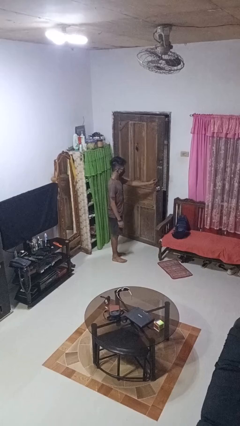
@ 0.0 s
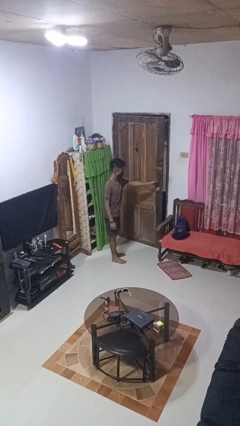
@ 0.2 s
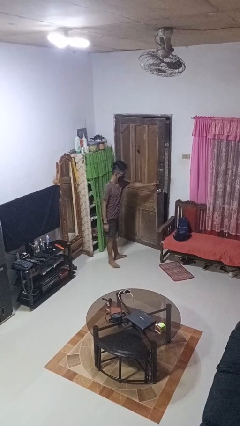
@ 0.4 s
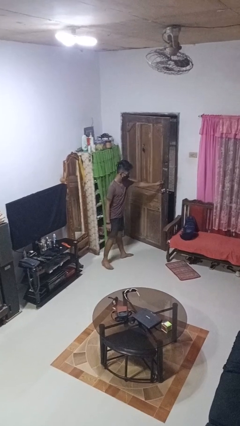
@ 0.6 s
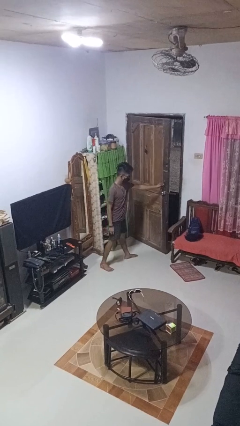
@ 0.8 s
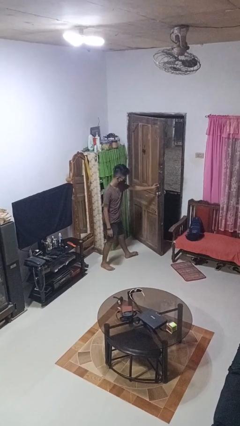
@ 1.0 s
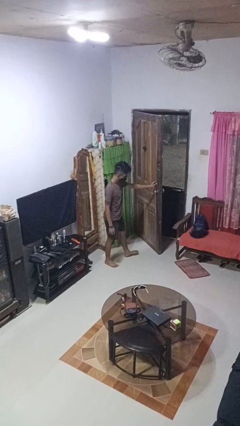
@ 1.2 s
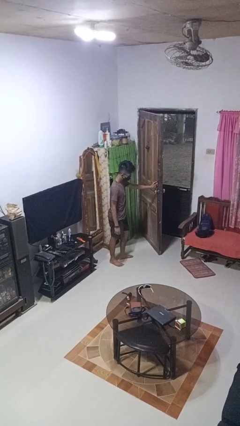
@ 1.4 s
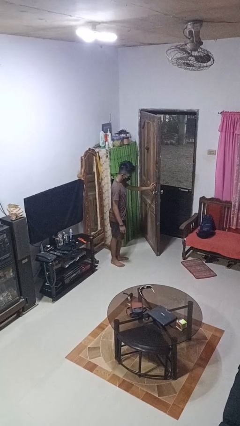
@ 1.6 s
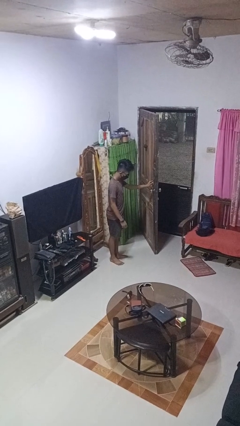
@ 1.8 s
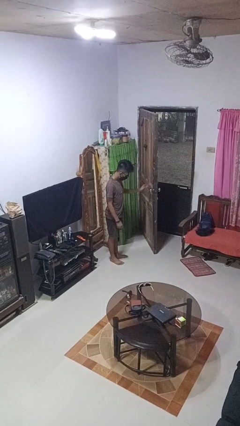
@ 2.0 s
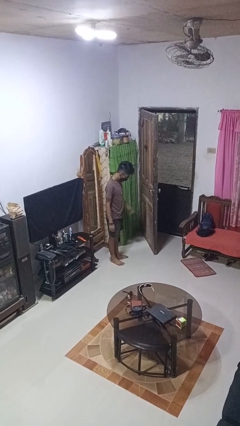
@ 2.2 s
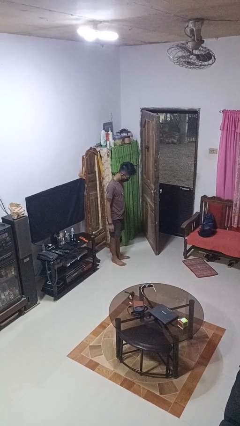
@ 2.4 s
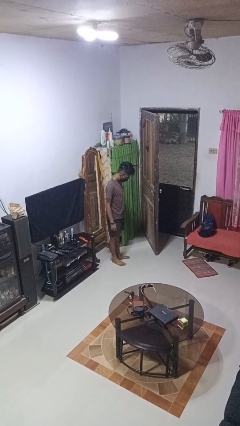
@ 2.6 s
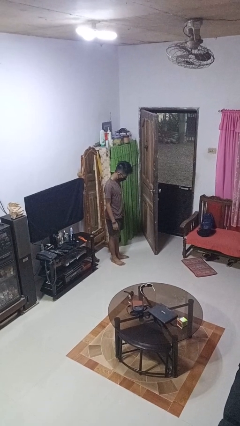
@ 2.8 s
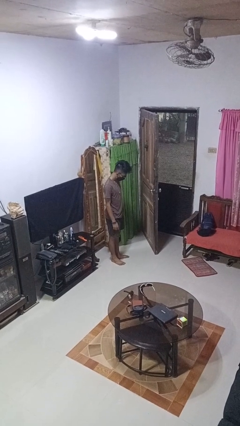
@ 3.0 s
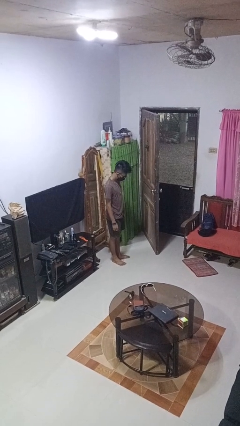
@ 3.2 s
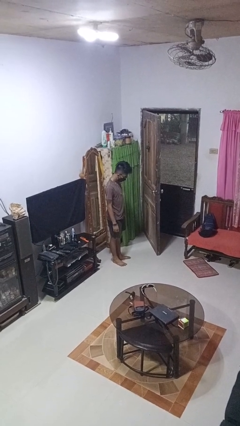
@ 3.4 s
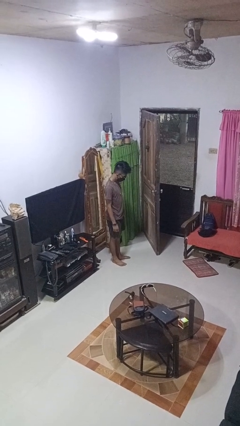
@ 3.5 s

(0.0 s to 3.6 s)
person opens facility door

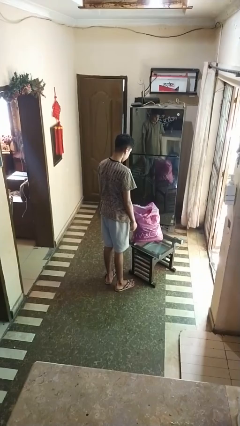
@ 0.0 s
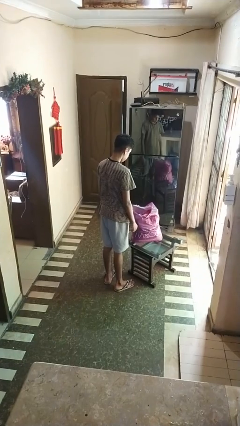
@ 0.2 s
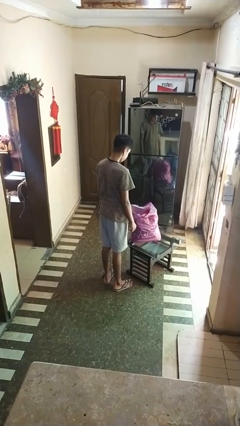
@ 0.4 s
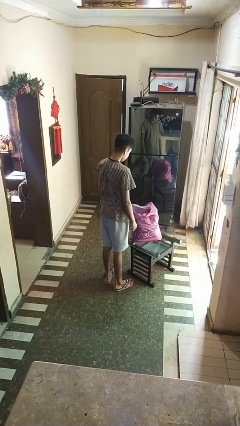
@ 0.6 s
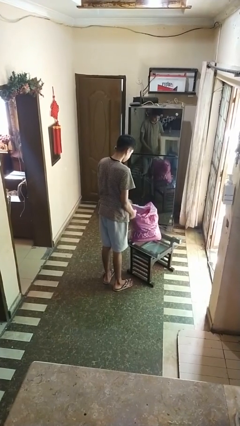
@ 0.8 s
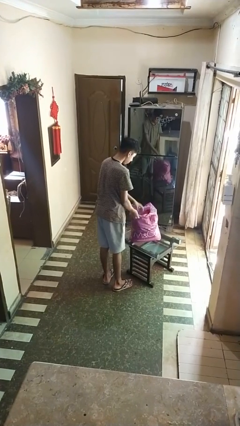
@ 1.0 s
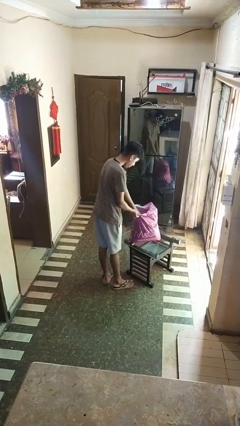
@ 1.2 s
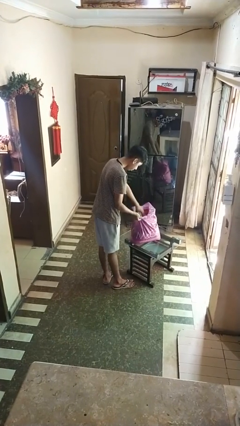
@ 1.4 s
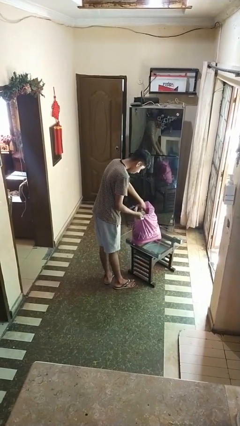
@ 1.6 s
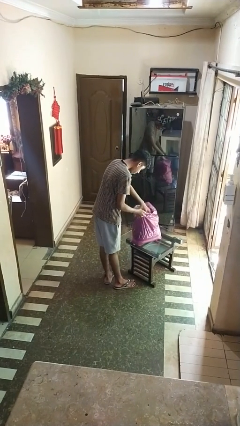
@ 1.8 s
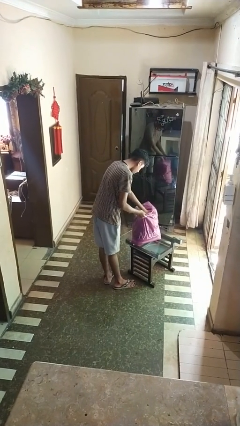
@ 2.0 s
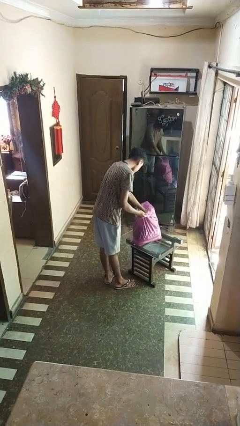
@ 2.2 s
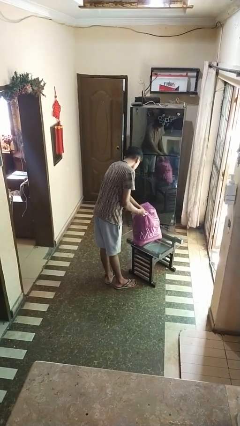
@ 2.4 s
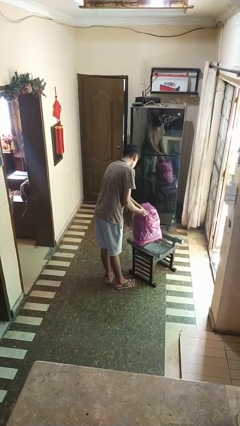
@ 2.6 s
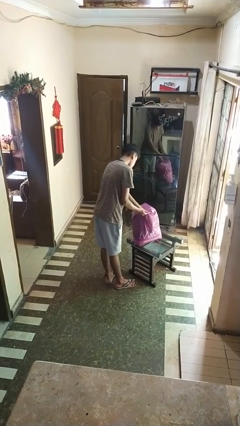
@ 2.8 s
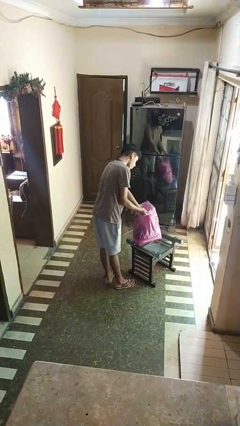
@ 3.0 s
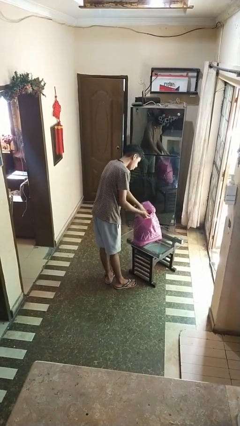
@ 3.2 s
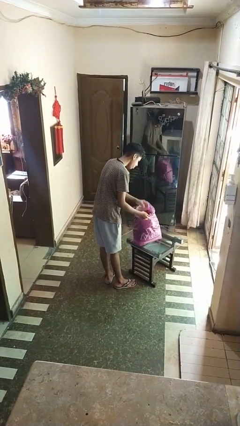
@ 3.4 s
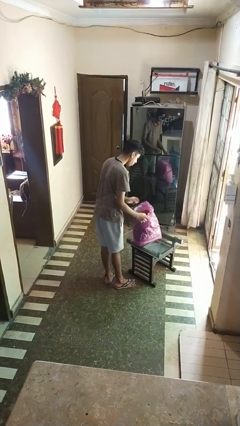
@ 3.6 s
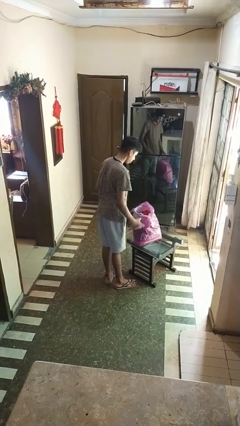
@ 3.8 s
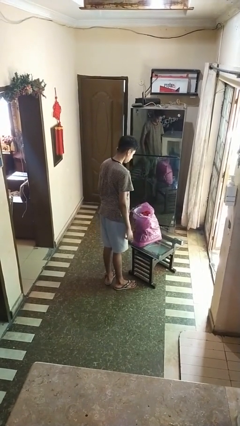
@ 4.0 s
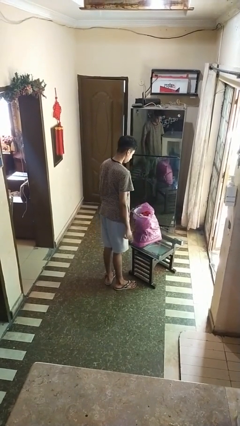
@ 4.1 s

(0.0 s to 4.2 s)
person searches in bag

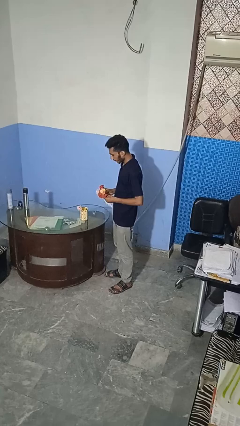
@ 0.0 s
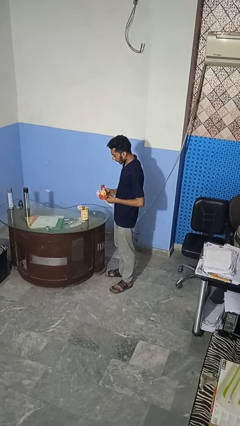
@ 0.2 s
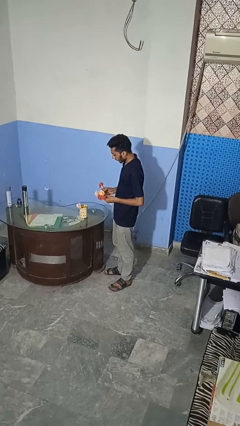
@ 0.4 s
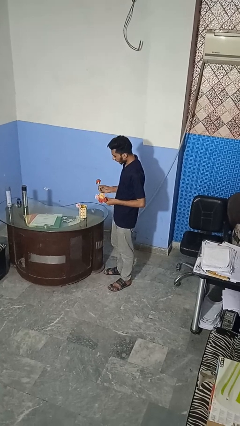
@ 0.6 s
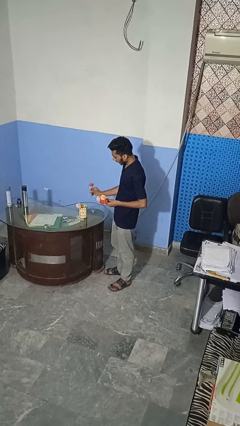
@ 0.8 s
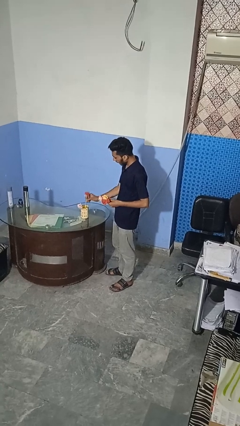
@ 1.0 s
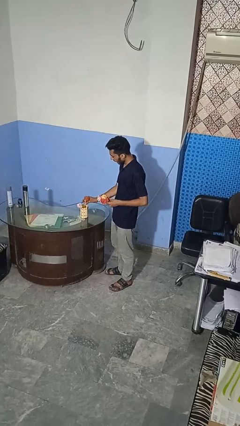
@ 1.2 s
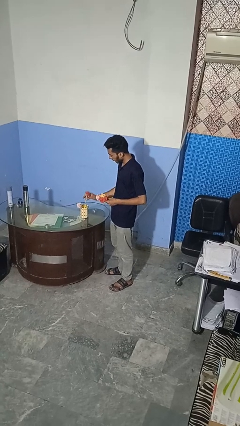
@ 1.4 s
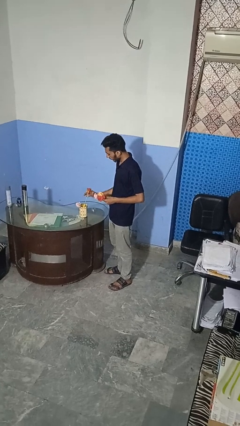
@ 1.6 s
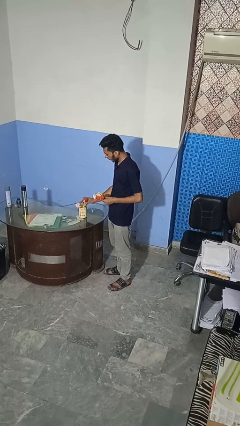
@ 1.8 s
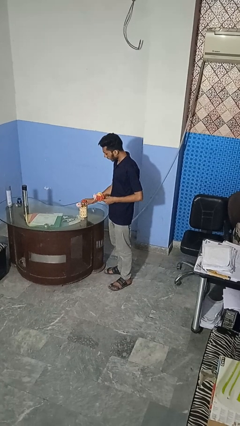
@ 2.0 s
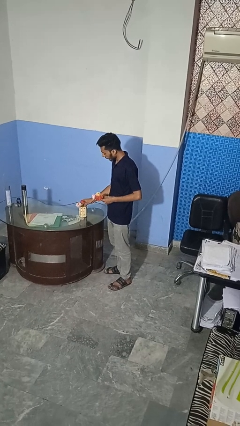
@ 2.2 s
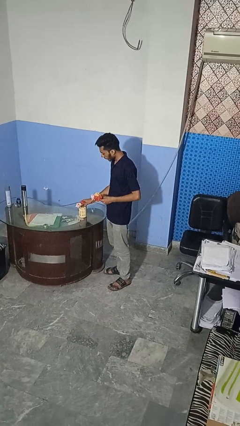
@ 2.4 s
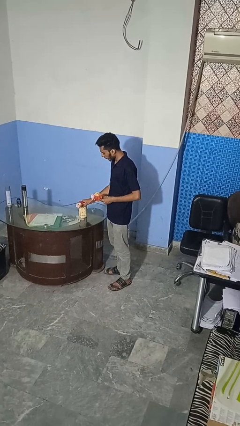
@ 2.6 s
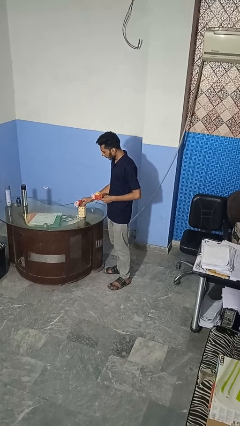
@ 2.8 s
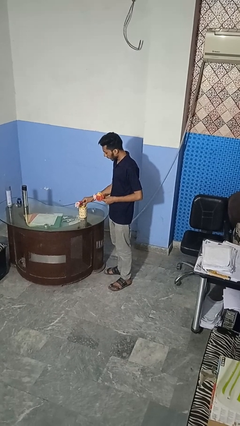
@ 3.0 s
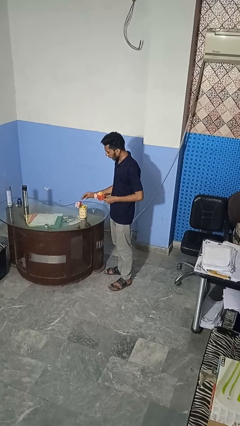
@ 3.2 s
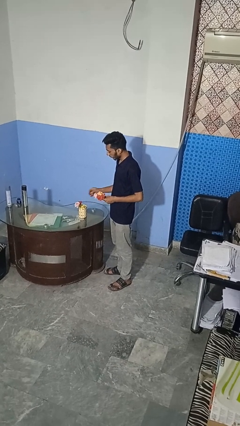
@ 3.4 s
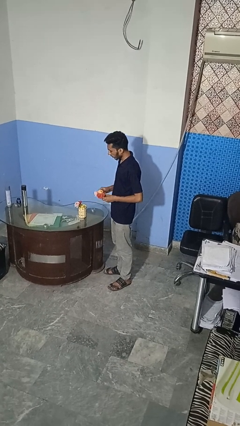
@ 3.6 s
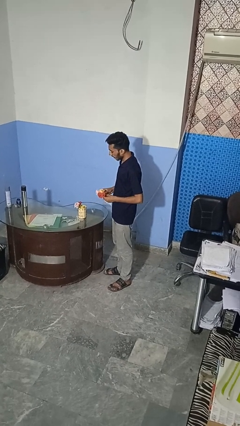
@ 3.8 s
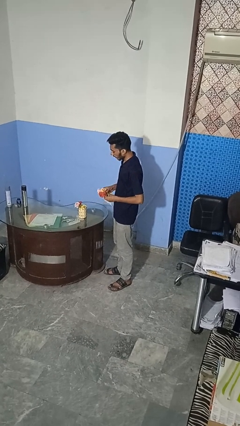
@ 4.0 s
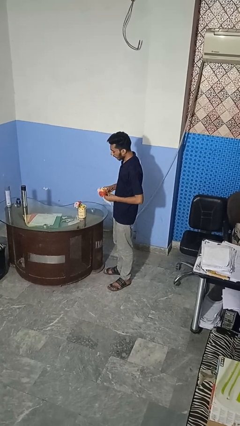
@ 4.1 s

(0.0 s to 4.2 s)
person arranges flowers in vase

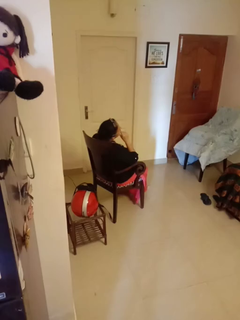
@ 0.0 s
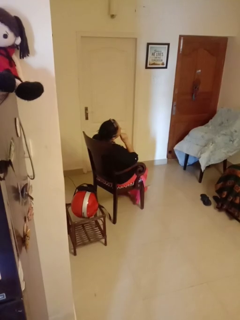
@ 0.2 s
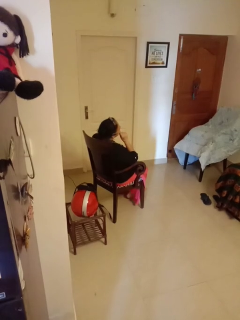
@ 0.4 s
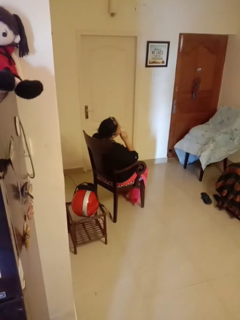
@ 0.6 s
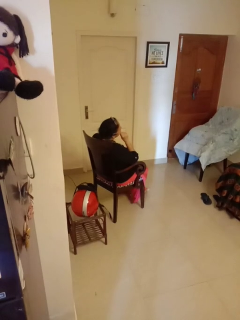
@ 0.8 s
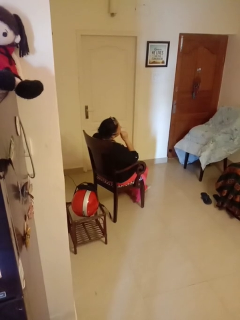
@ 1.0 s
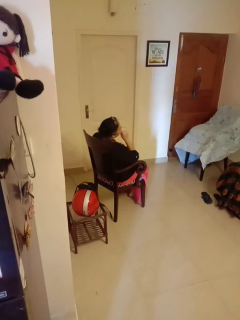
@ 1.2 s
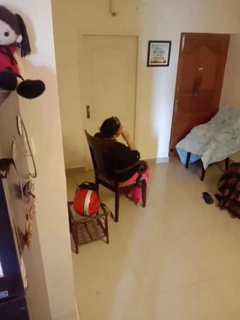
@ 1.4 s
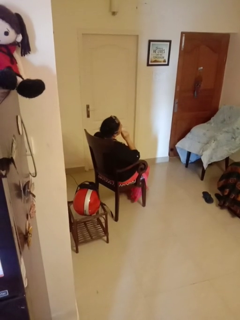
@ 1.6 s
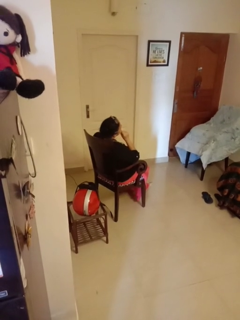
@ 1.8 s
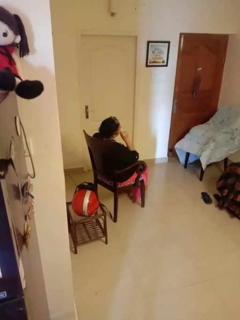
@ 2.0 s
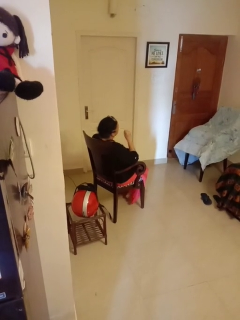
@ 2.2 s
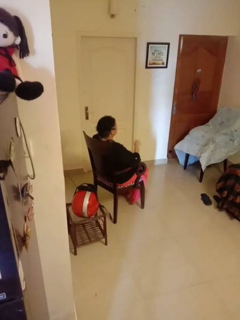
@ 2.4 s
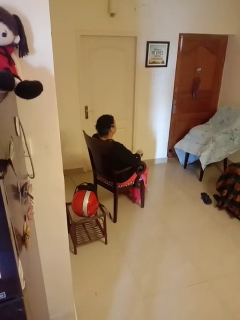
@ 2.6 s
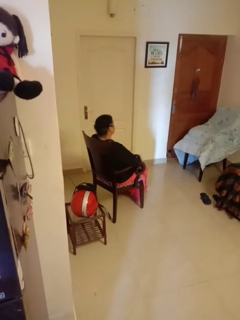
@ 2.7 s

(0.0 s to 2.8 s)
person strokes chin

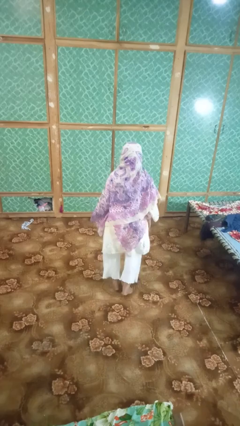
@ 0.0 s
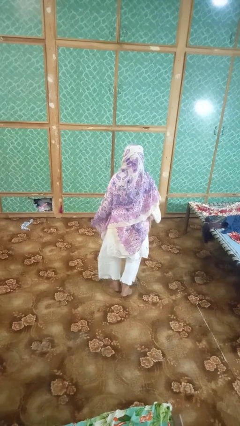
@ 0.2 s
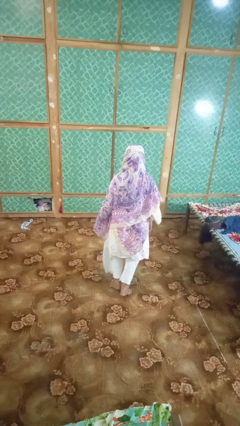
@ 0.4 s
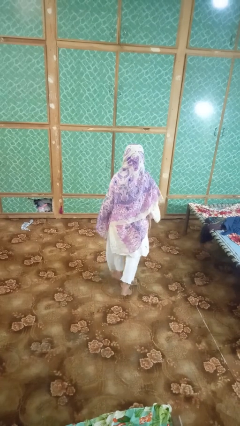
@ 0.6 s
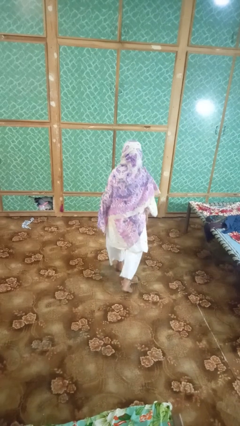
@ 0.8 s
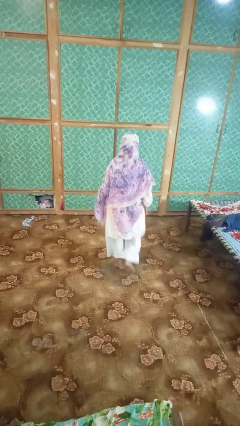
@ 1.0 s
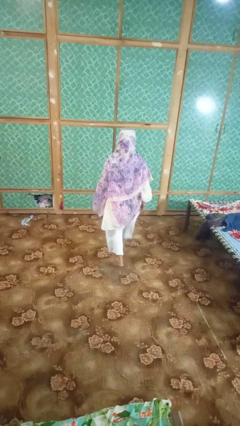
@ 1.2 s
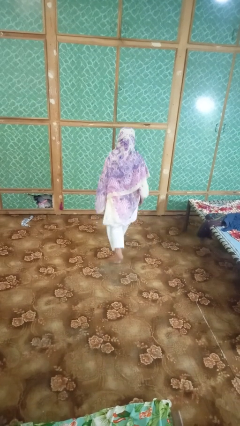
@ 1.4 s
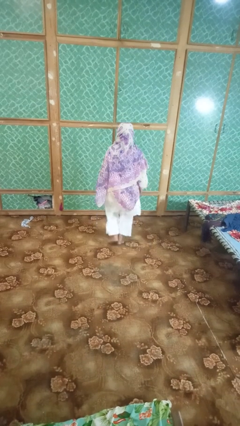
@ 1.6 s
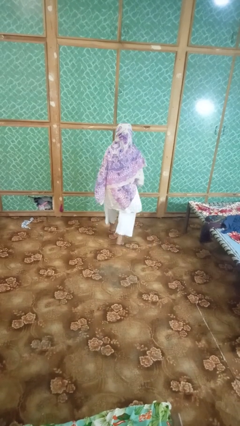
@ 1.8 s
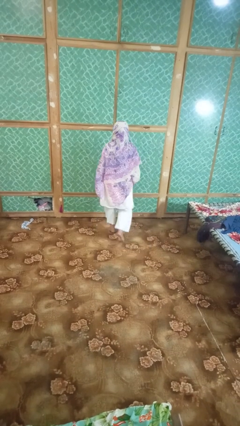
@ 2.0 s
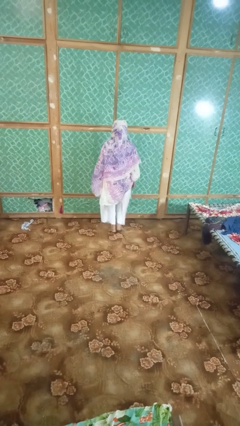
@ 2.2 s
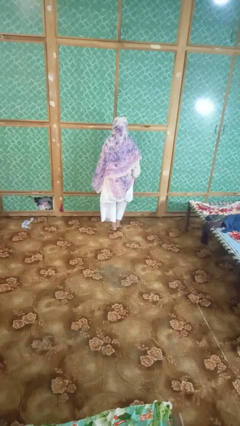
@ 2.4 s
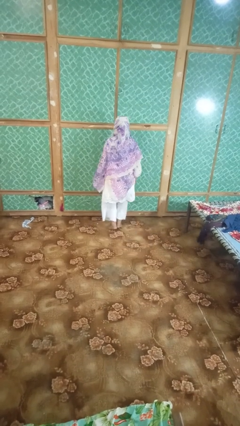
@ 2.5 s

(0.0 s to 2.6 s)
person walks tiptoe

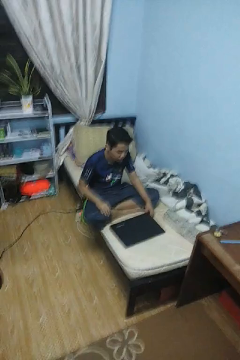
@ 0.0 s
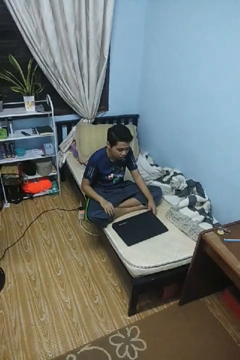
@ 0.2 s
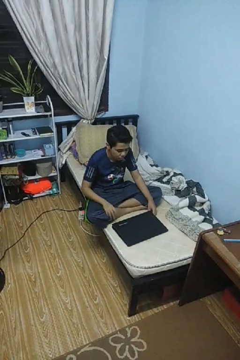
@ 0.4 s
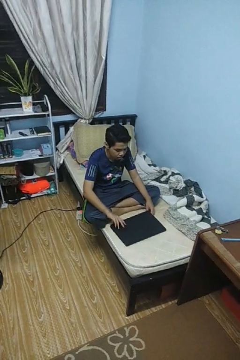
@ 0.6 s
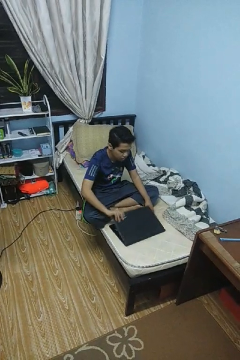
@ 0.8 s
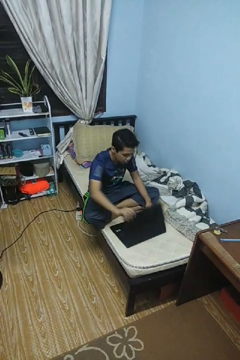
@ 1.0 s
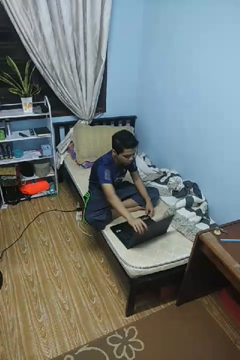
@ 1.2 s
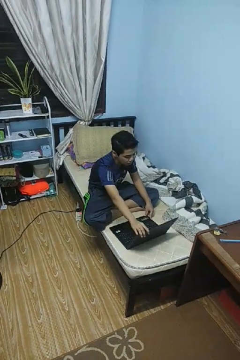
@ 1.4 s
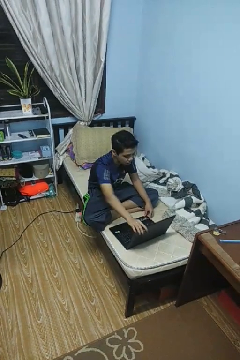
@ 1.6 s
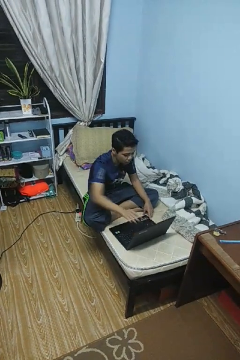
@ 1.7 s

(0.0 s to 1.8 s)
person opens laptop
